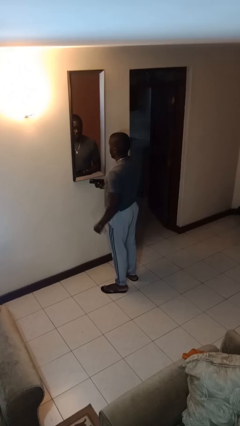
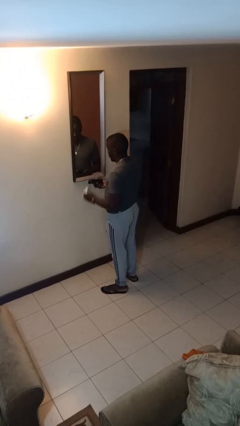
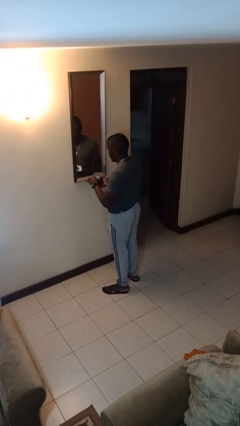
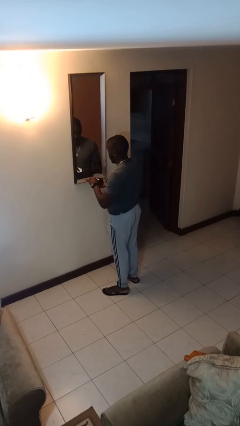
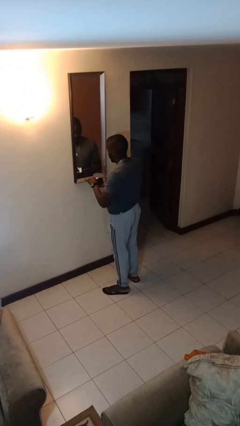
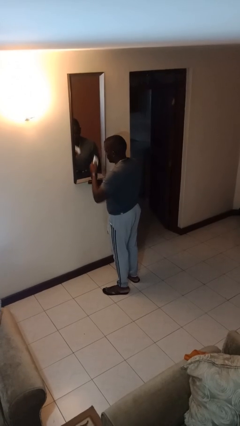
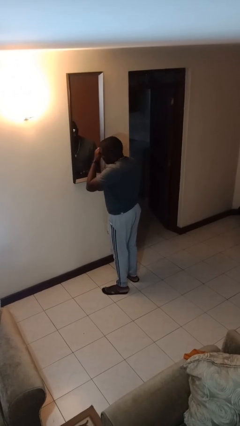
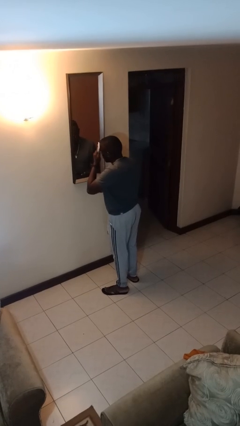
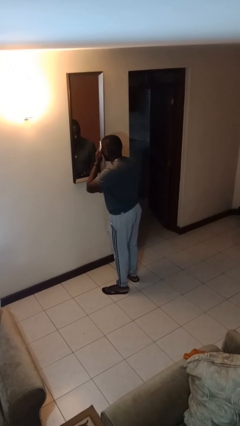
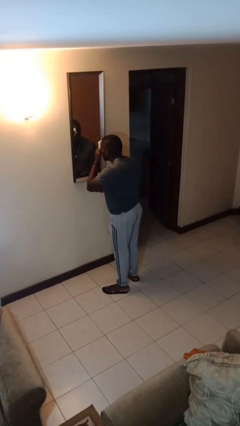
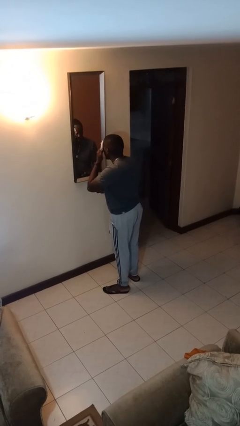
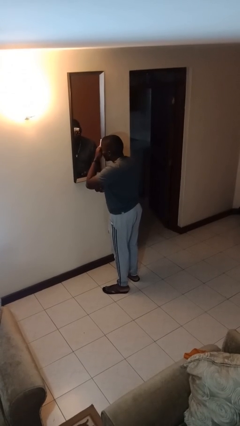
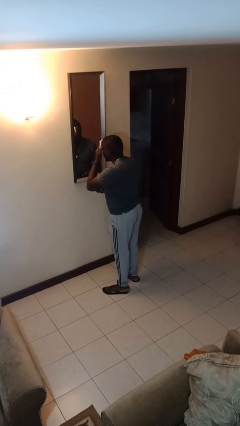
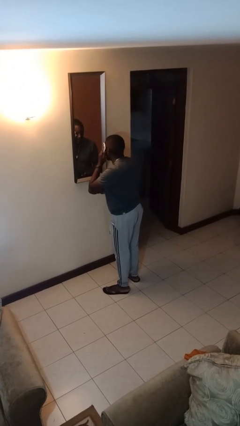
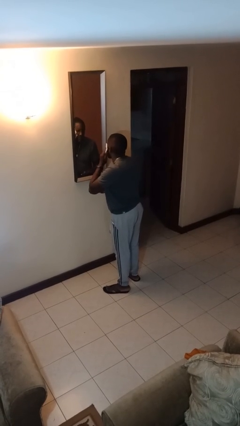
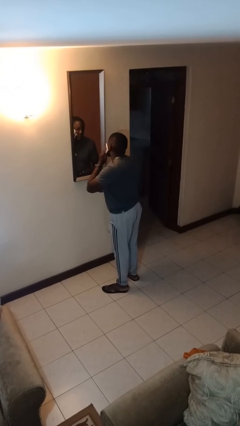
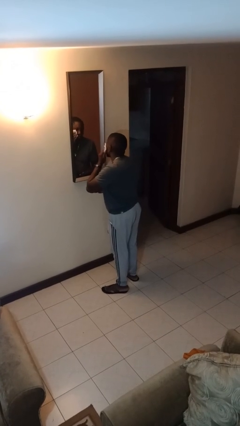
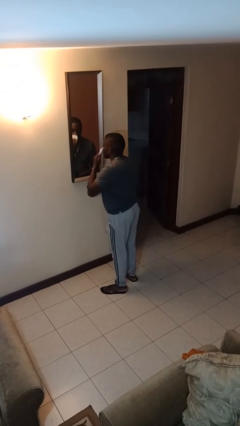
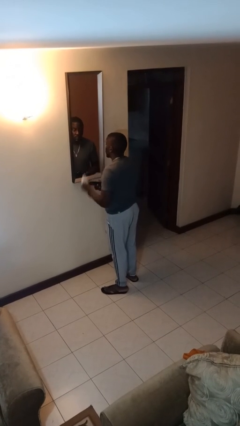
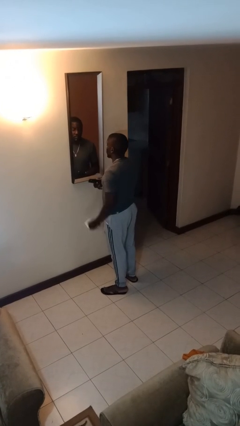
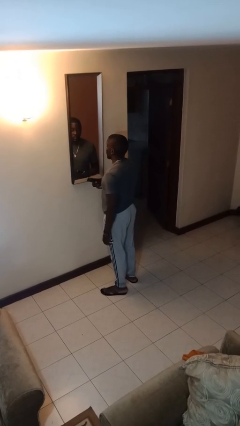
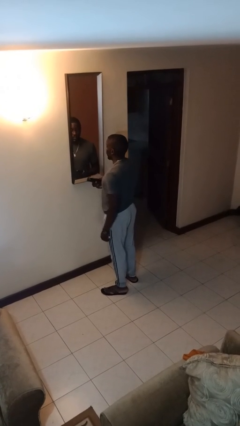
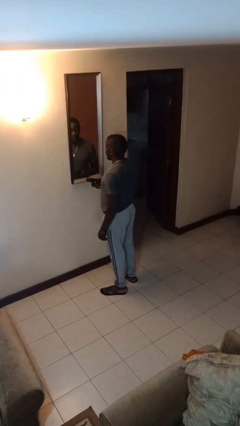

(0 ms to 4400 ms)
person applies foundation makeup

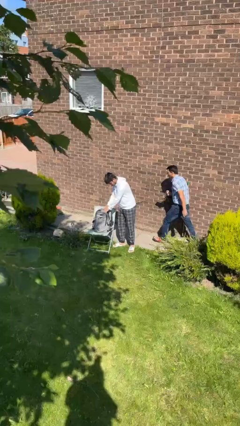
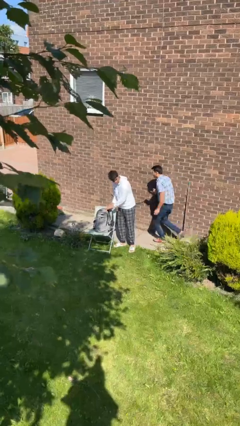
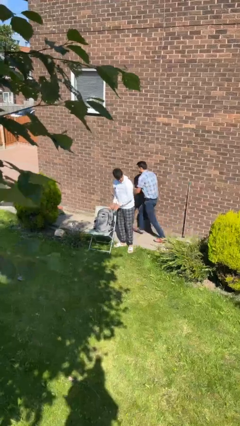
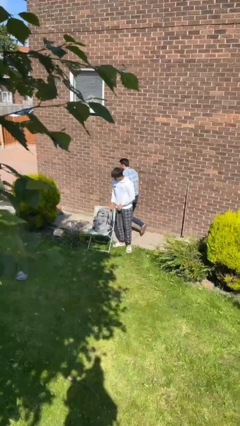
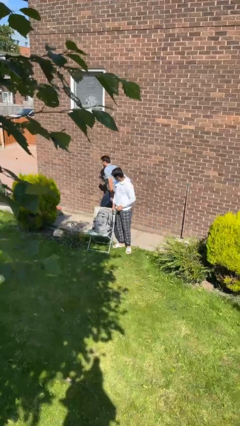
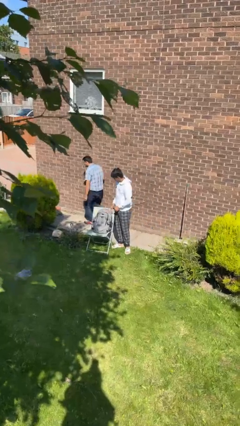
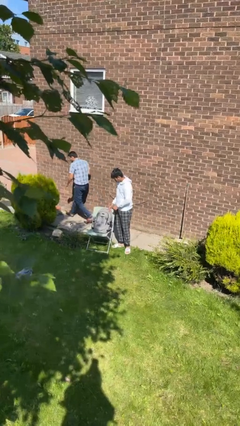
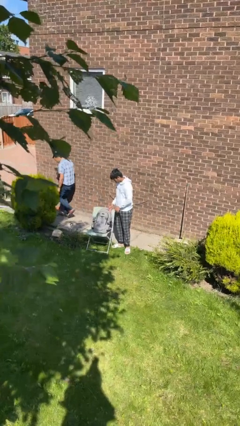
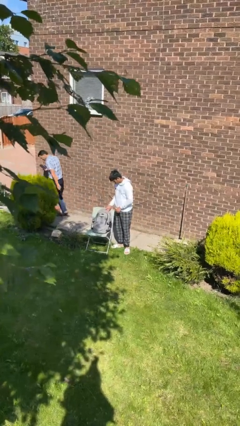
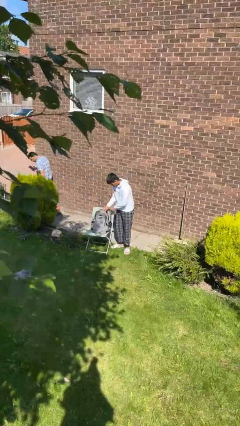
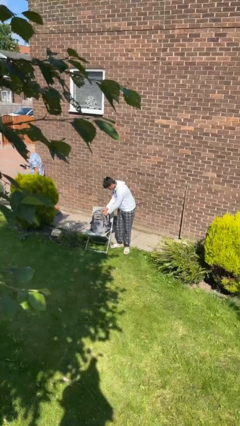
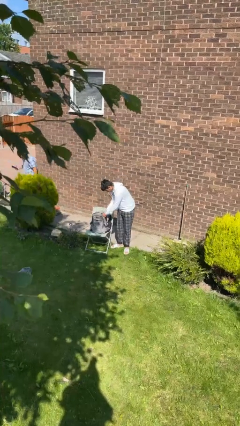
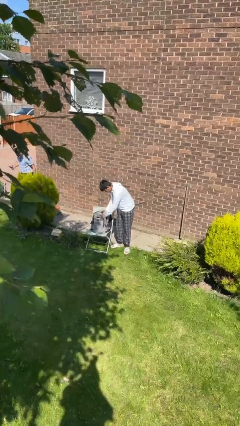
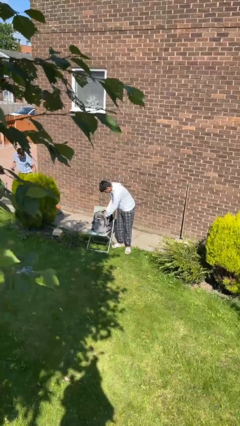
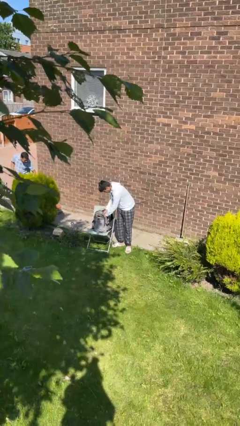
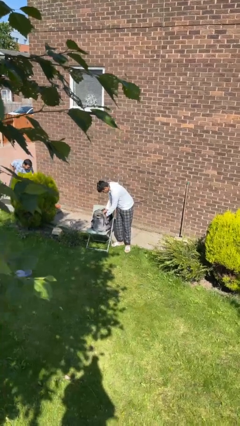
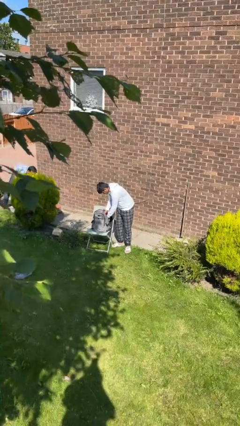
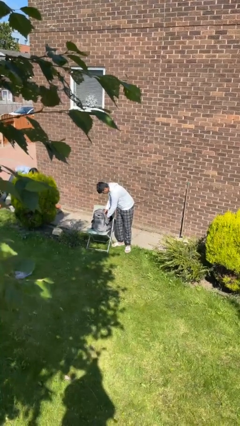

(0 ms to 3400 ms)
person searches in backpack

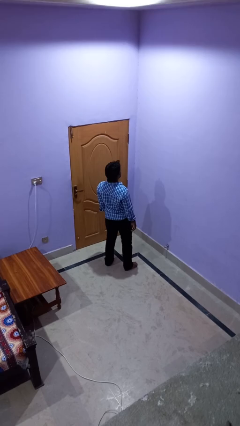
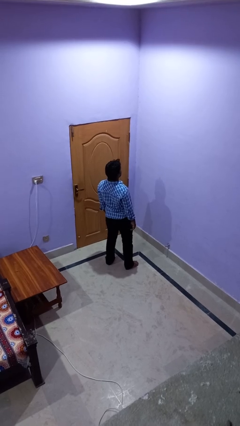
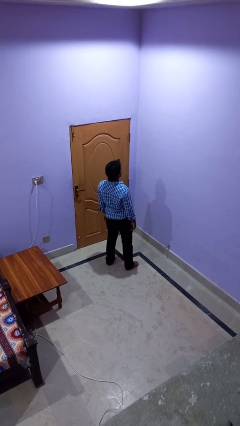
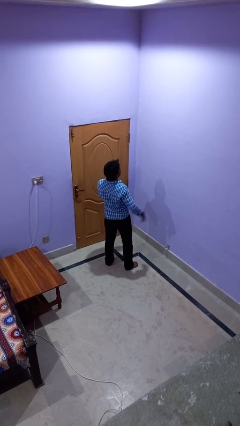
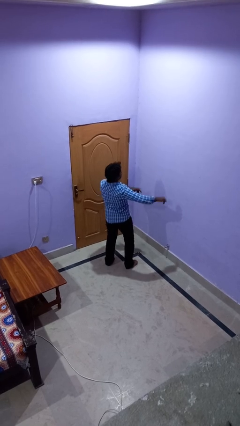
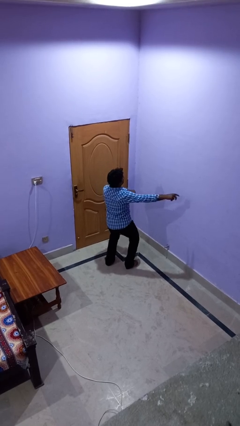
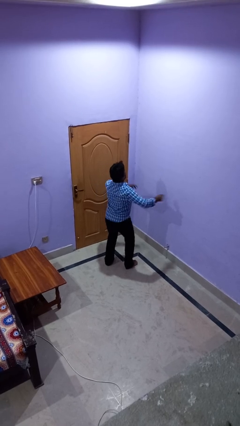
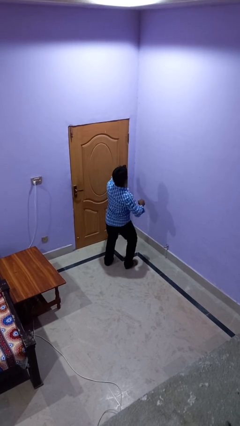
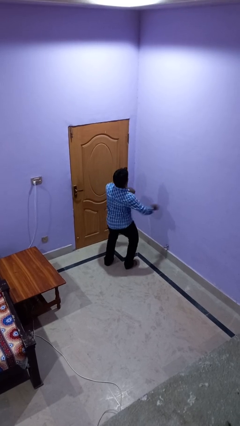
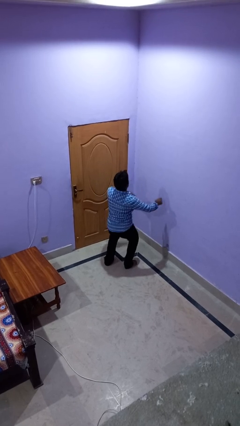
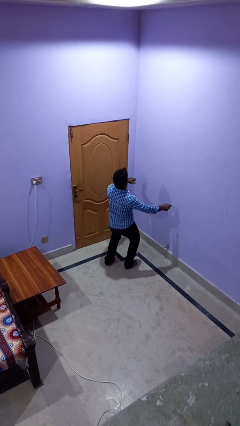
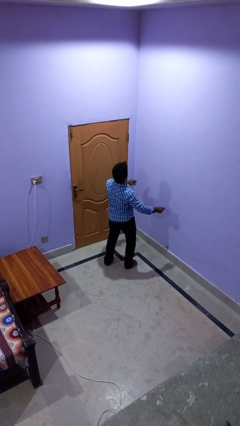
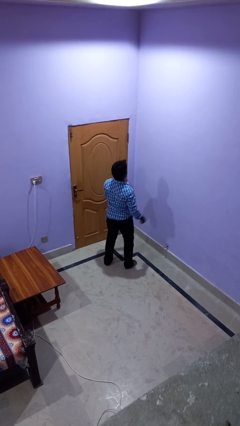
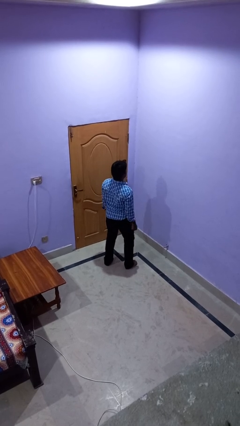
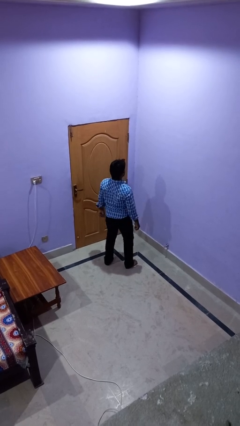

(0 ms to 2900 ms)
person dances in place

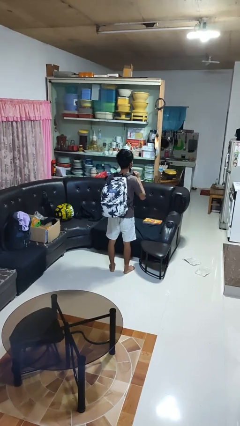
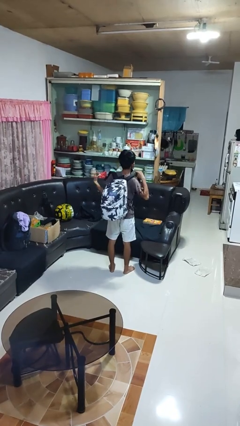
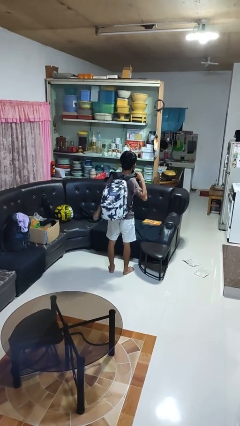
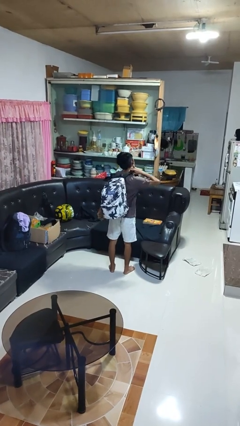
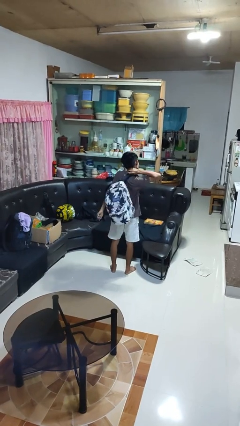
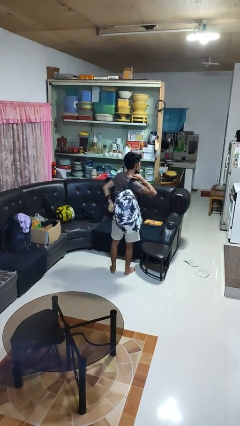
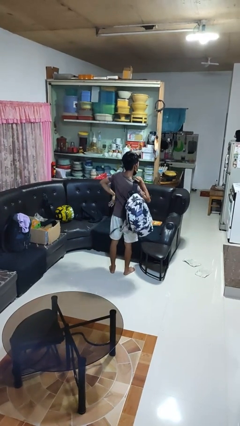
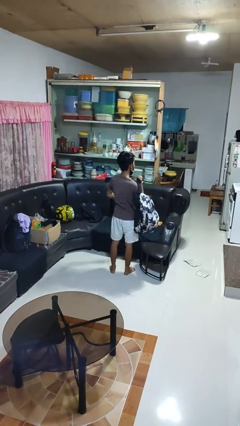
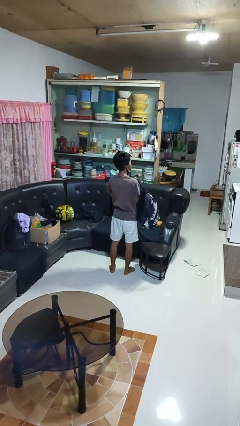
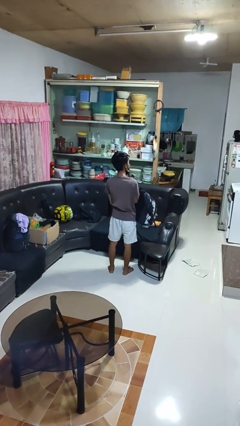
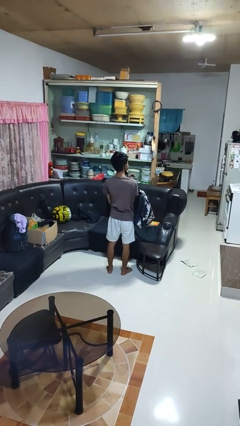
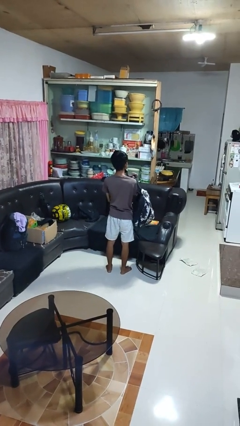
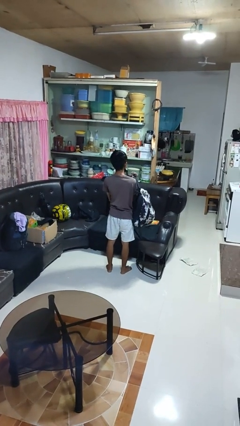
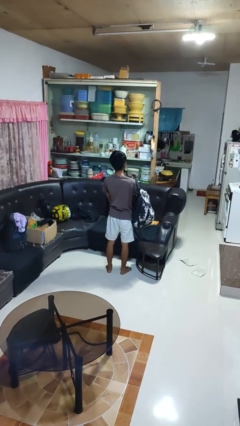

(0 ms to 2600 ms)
person takes off backpack

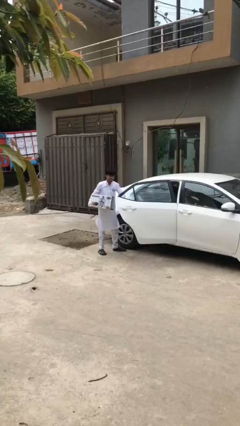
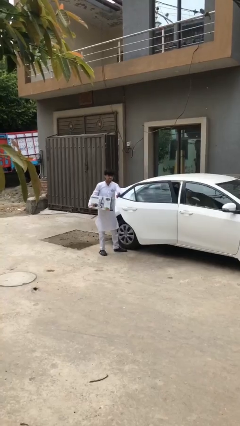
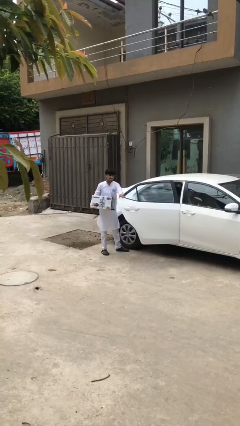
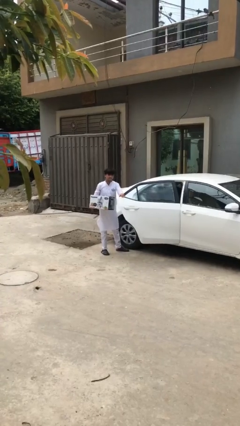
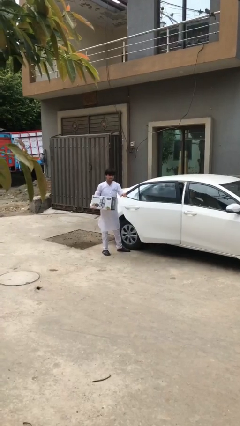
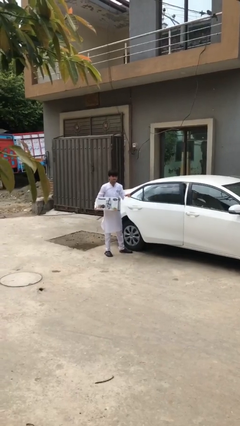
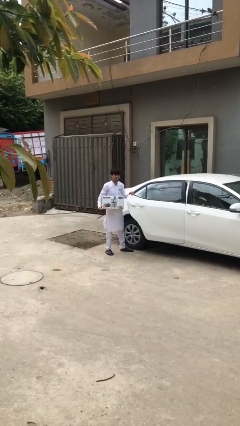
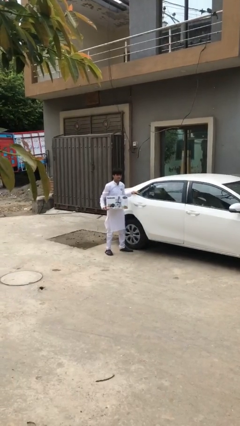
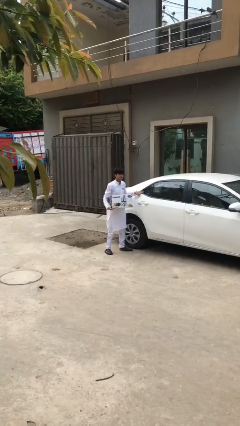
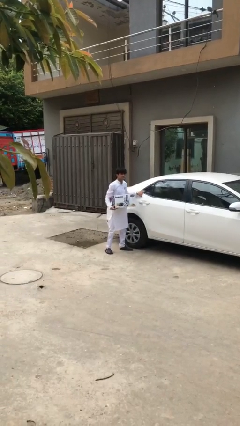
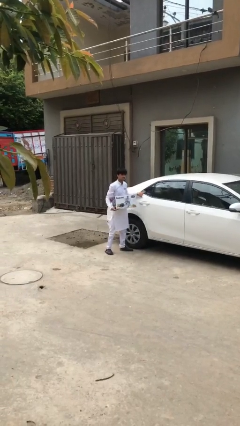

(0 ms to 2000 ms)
person closes car door

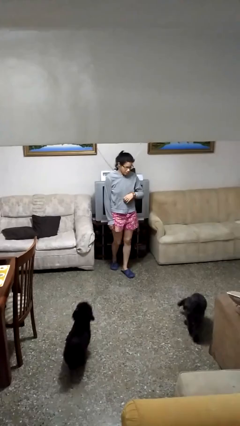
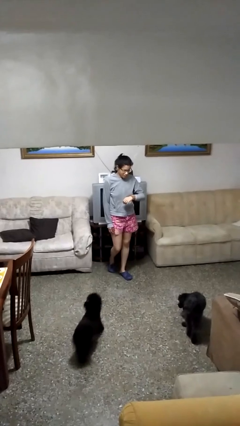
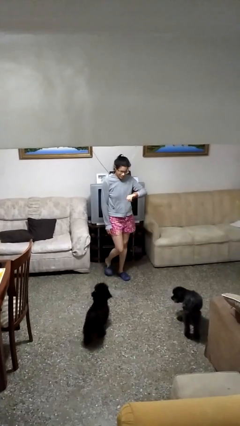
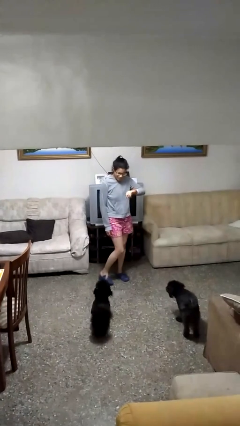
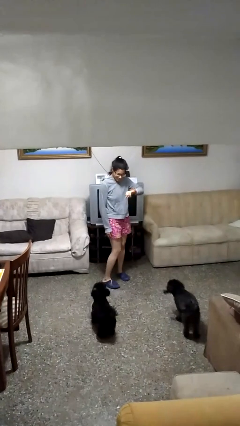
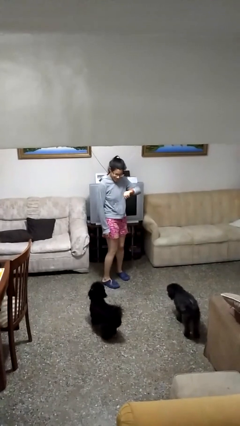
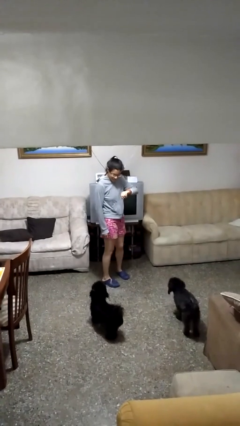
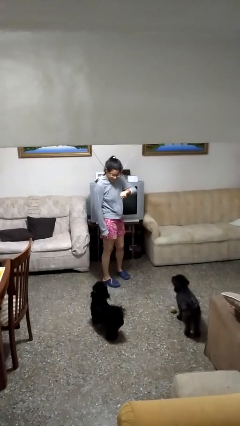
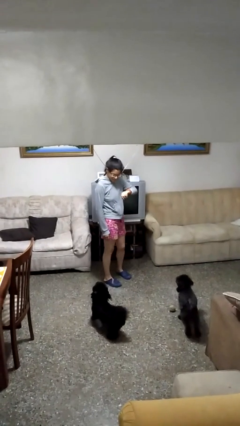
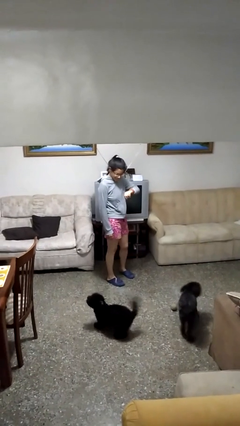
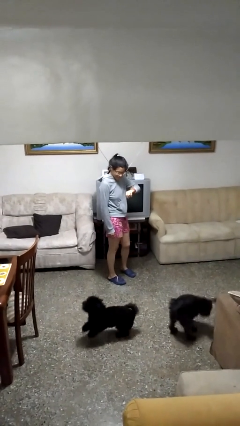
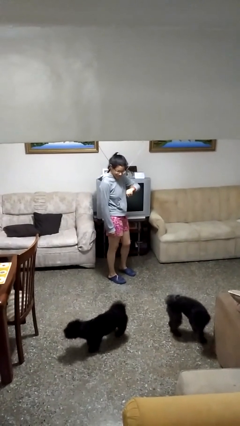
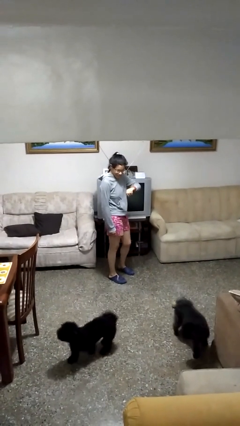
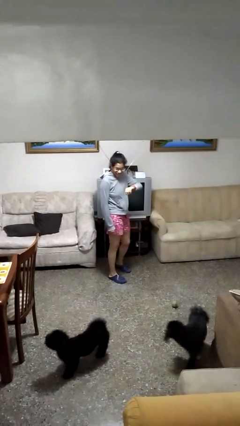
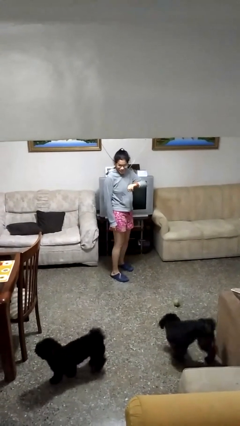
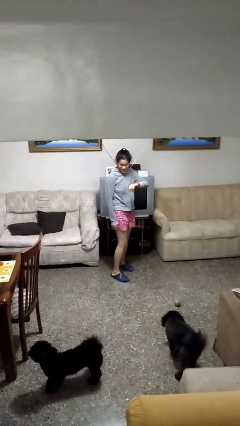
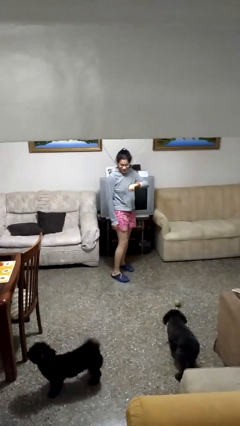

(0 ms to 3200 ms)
person looks at wristwatch
